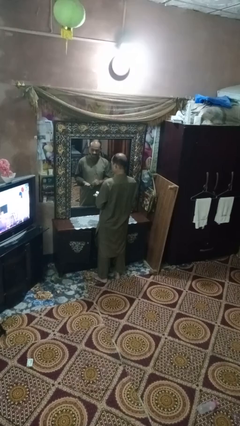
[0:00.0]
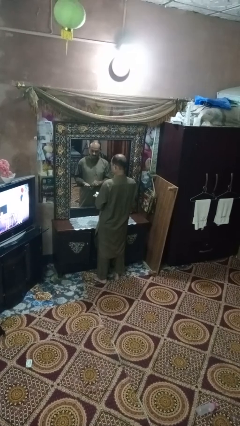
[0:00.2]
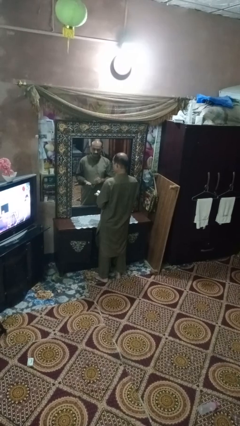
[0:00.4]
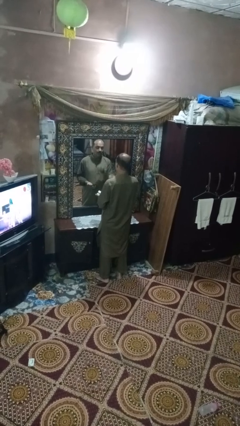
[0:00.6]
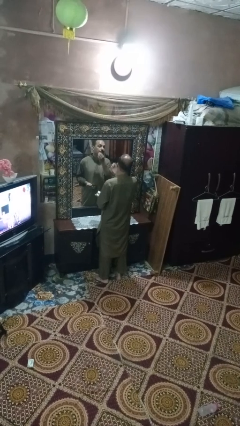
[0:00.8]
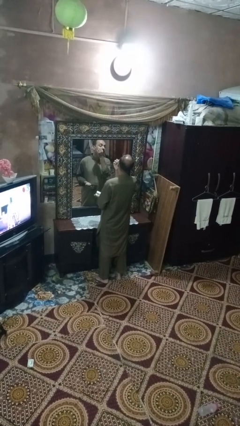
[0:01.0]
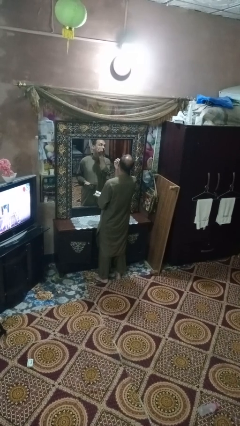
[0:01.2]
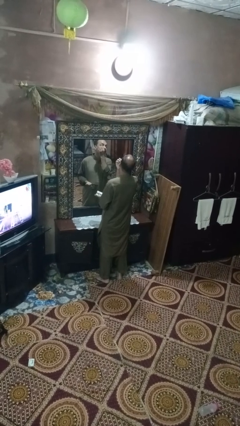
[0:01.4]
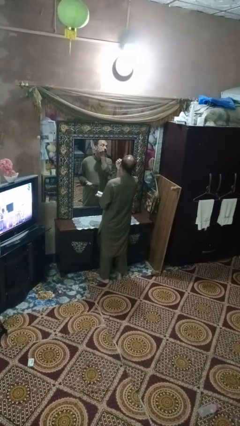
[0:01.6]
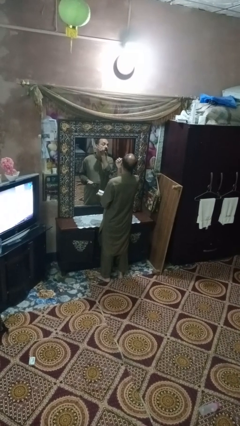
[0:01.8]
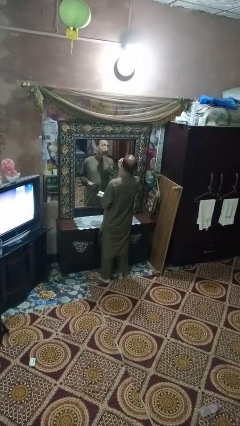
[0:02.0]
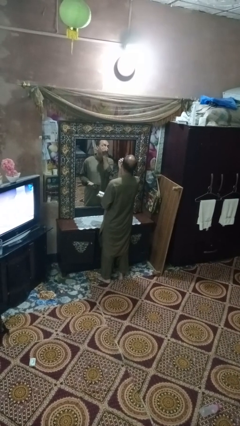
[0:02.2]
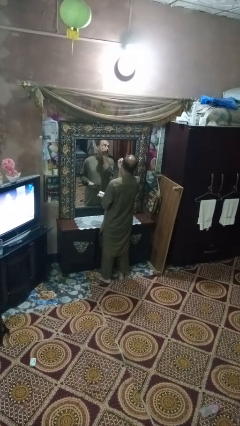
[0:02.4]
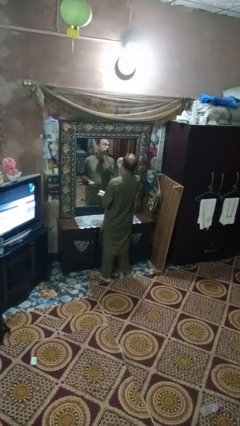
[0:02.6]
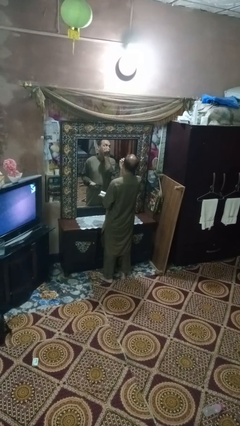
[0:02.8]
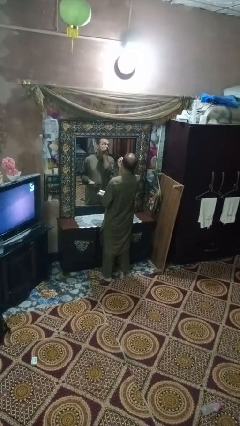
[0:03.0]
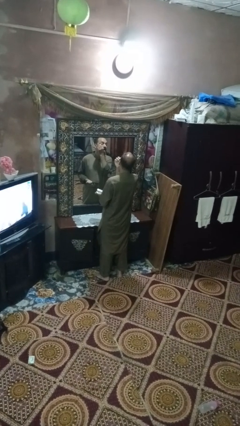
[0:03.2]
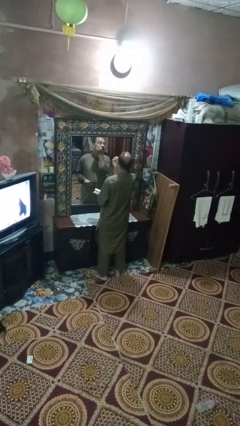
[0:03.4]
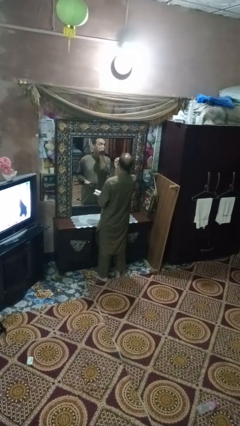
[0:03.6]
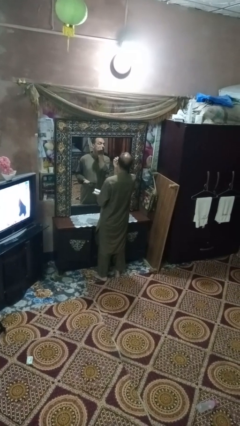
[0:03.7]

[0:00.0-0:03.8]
person applies eye makeup

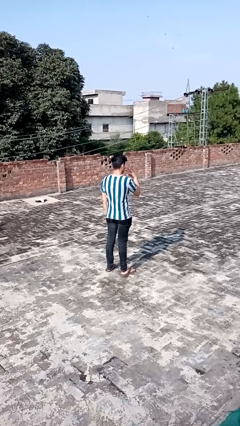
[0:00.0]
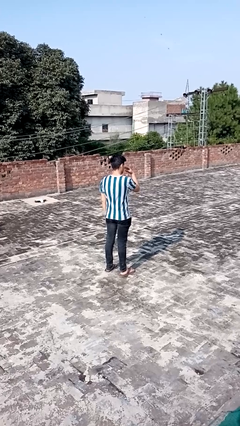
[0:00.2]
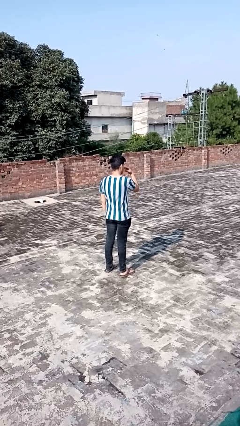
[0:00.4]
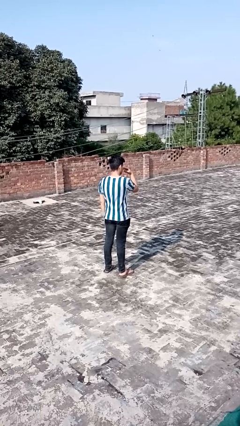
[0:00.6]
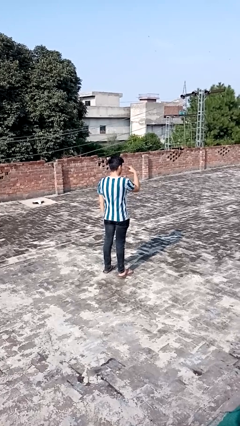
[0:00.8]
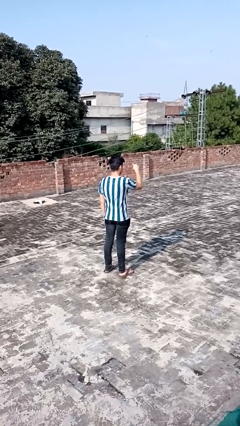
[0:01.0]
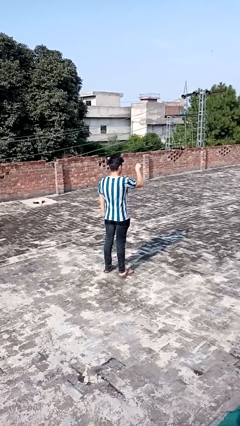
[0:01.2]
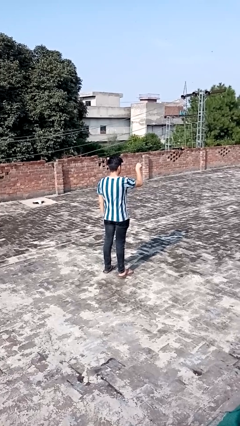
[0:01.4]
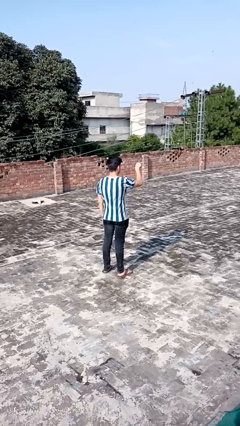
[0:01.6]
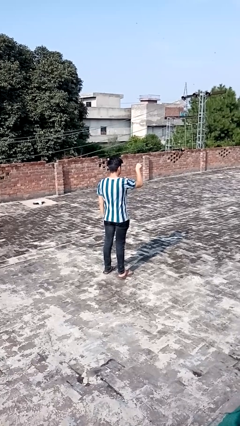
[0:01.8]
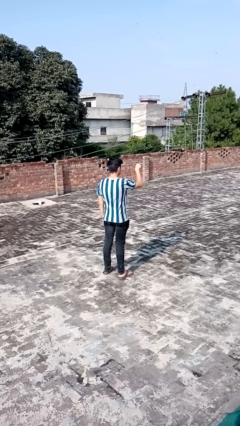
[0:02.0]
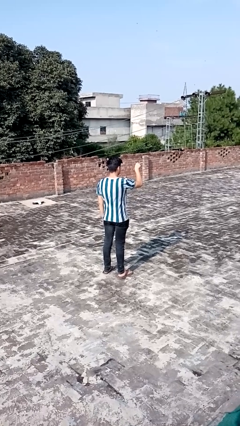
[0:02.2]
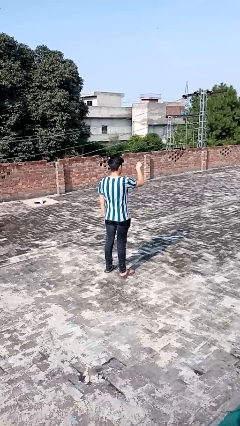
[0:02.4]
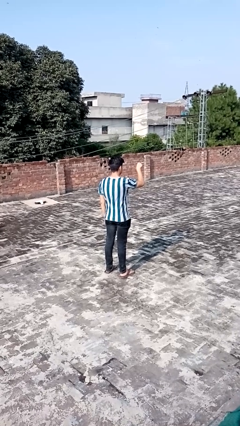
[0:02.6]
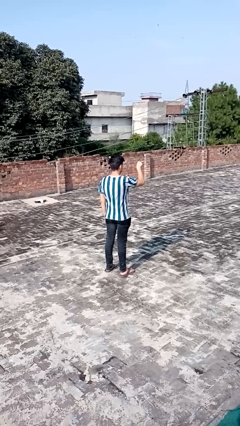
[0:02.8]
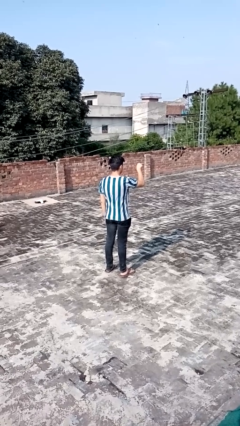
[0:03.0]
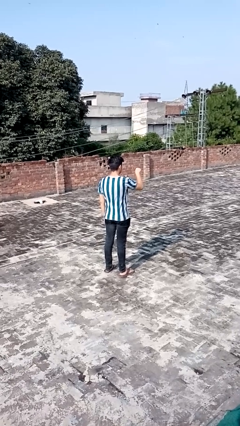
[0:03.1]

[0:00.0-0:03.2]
person gestures watch closely

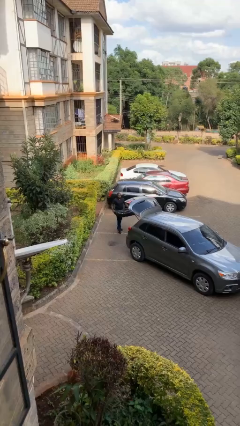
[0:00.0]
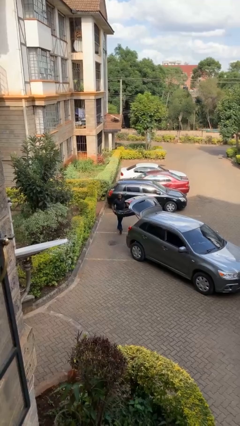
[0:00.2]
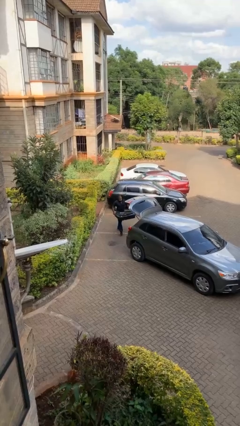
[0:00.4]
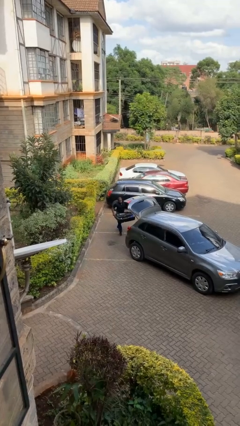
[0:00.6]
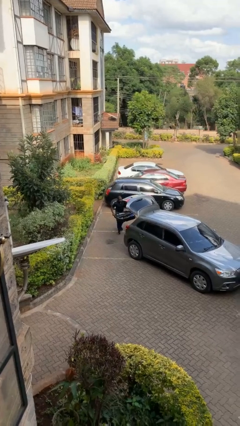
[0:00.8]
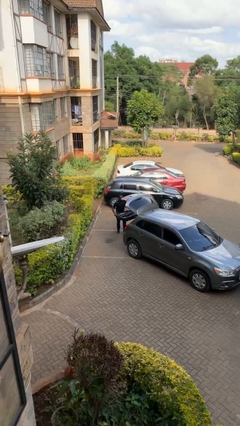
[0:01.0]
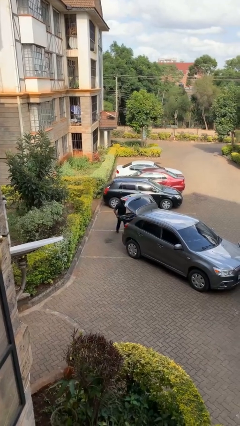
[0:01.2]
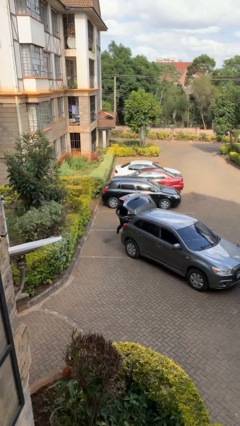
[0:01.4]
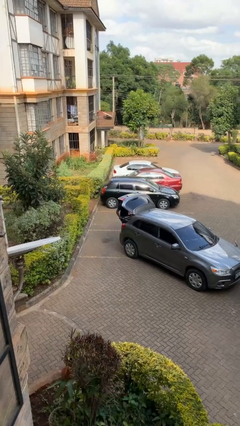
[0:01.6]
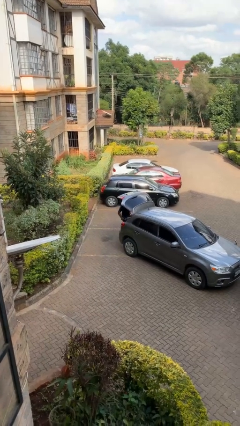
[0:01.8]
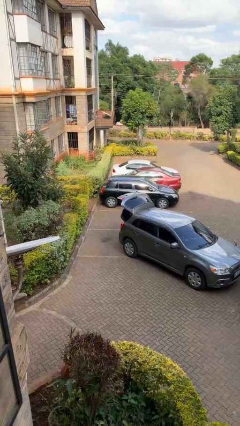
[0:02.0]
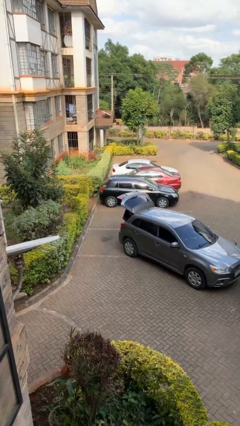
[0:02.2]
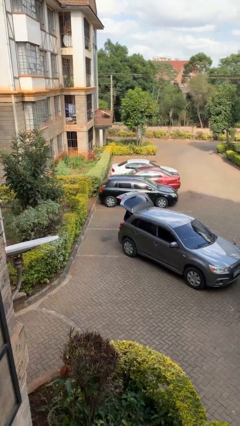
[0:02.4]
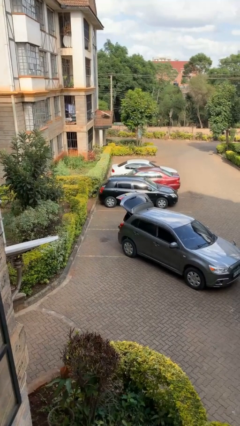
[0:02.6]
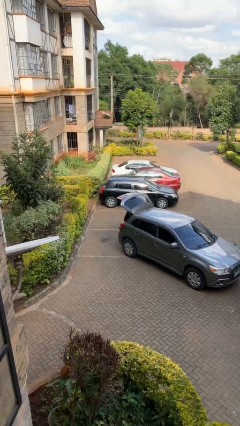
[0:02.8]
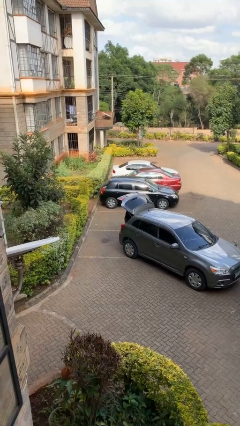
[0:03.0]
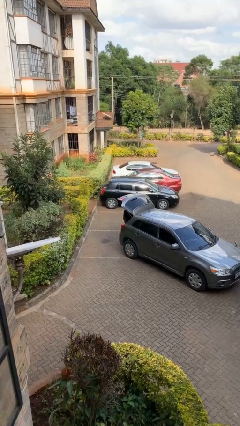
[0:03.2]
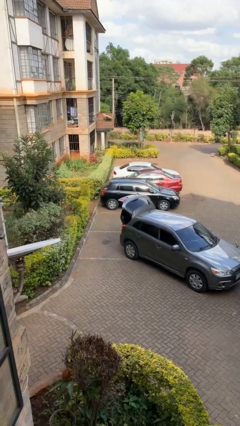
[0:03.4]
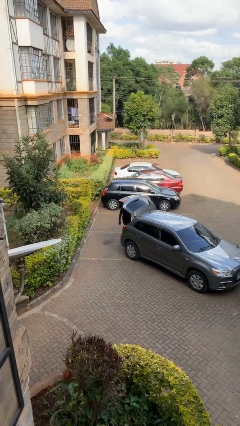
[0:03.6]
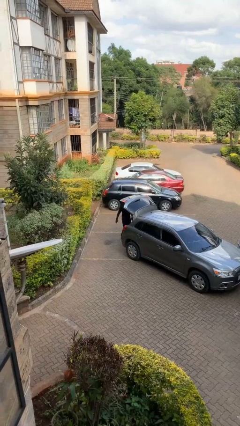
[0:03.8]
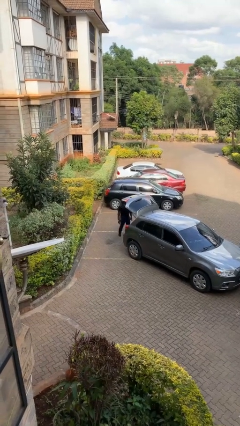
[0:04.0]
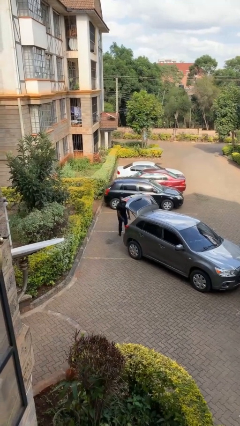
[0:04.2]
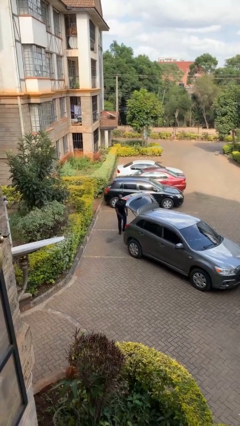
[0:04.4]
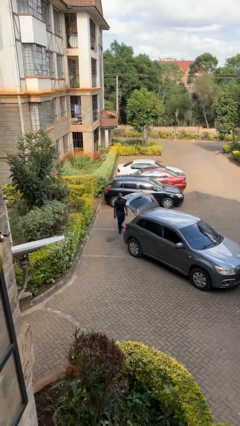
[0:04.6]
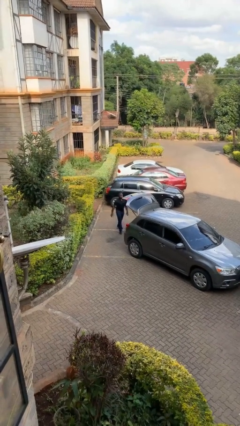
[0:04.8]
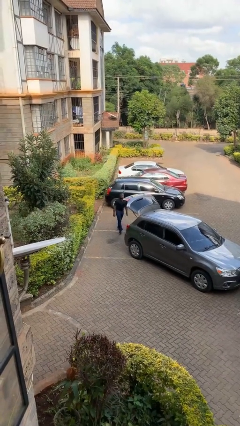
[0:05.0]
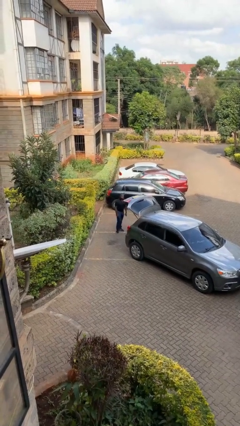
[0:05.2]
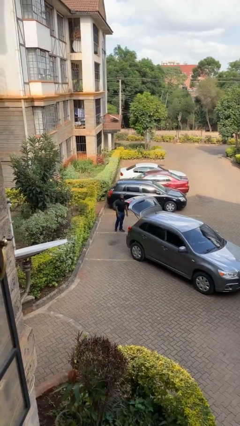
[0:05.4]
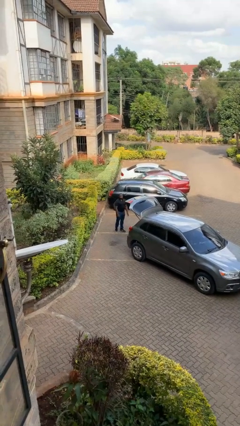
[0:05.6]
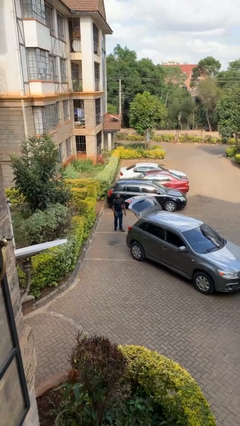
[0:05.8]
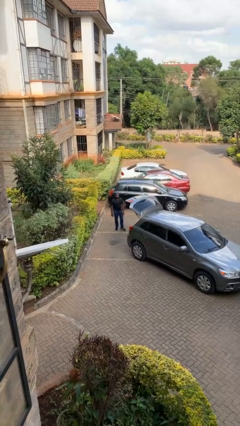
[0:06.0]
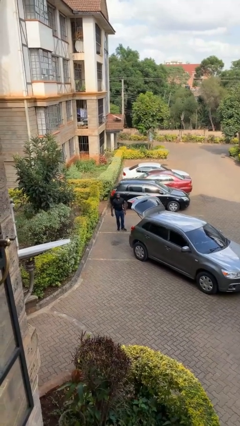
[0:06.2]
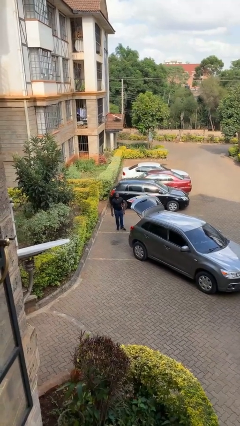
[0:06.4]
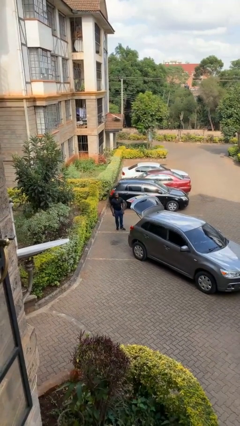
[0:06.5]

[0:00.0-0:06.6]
person loads car

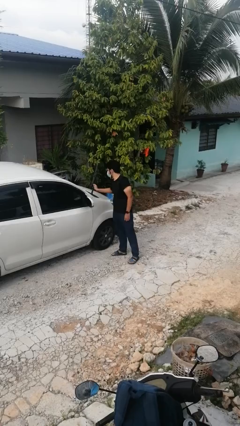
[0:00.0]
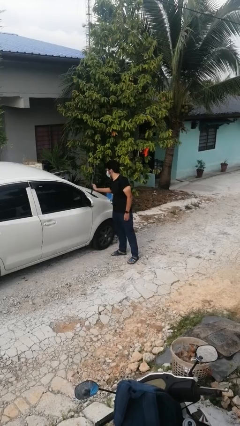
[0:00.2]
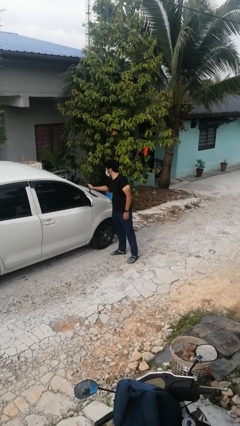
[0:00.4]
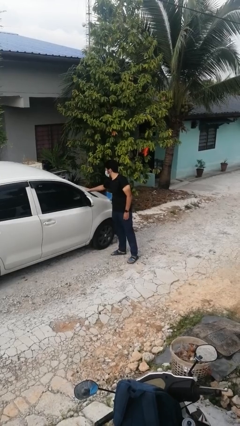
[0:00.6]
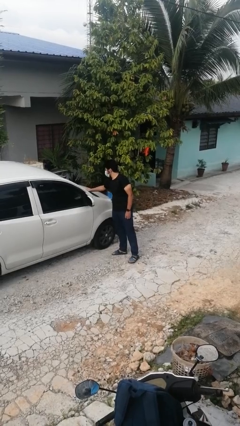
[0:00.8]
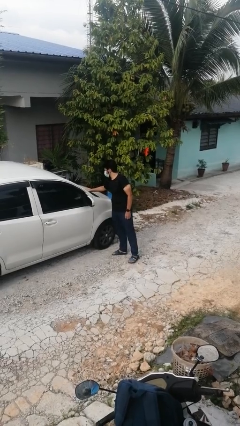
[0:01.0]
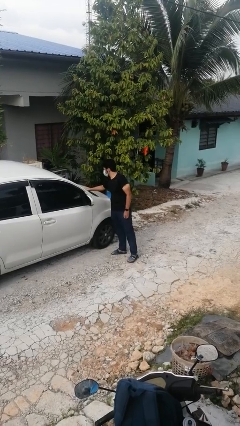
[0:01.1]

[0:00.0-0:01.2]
person flips down car wipers

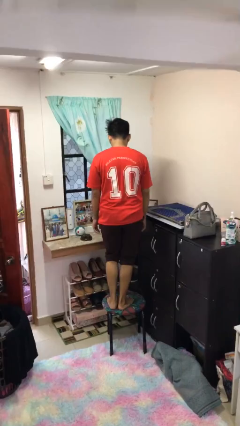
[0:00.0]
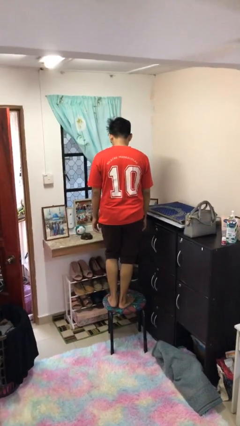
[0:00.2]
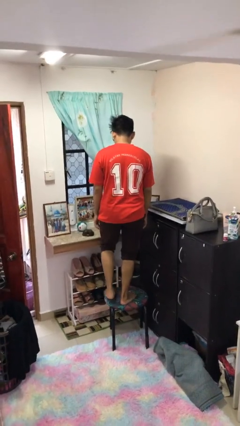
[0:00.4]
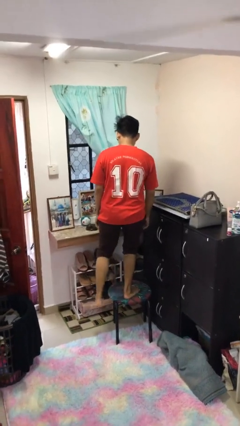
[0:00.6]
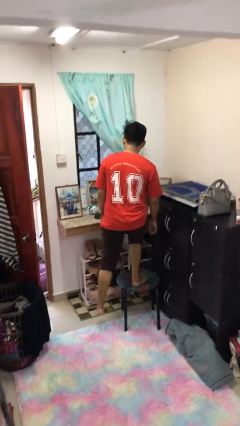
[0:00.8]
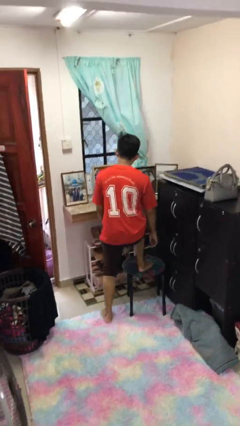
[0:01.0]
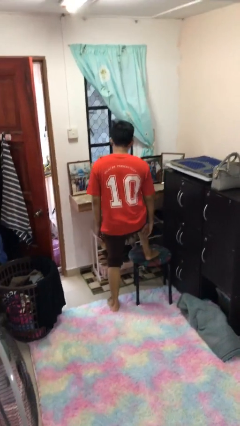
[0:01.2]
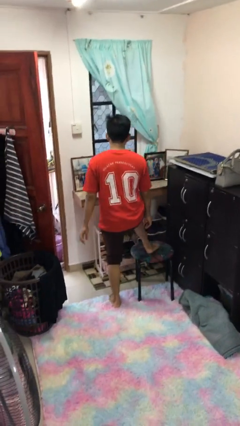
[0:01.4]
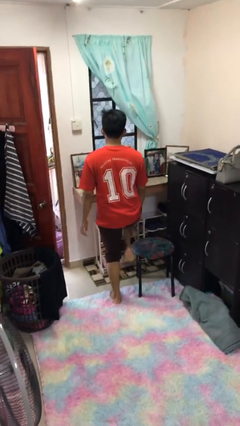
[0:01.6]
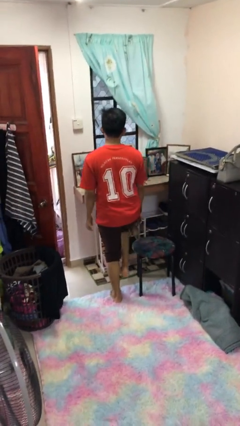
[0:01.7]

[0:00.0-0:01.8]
person climbs off chair

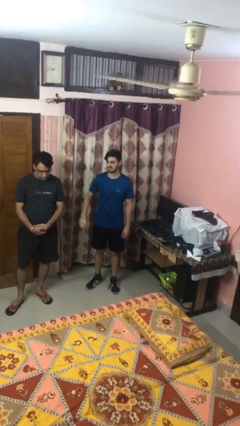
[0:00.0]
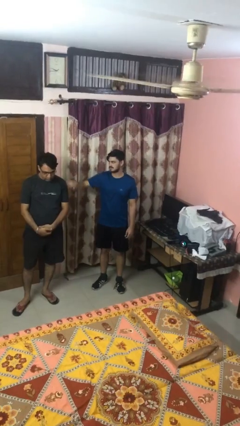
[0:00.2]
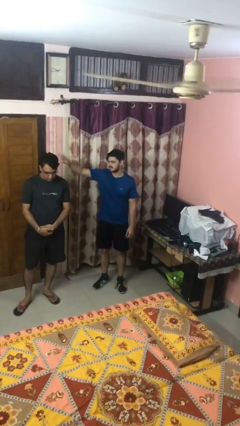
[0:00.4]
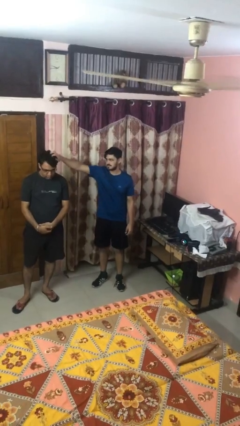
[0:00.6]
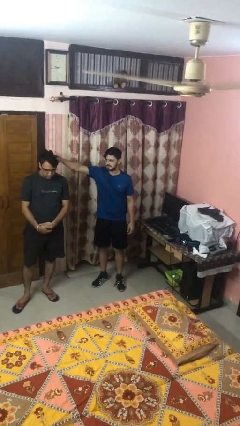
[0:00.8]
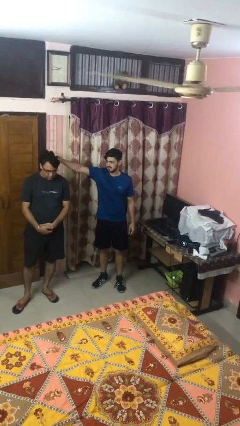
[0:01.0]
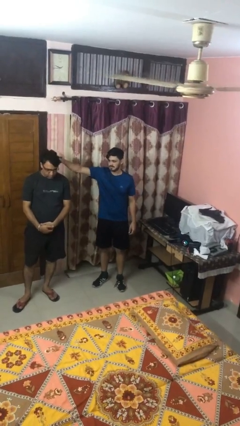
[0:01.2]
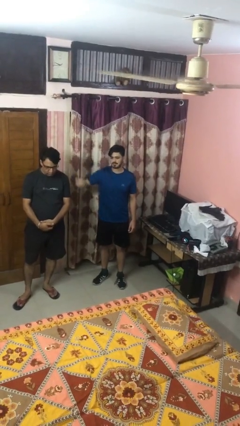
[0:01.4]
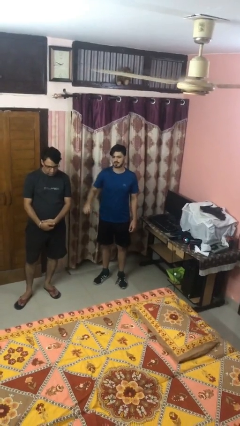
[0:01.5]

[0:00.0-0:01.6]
person grabs person by hair
